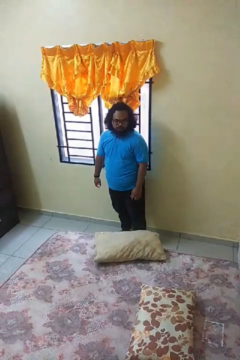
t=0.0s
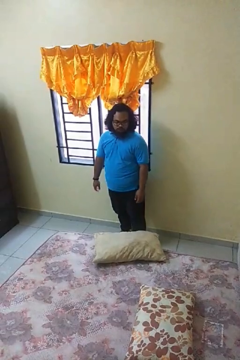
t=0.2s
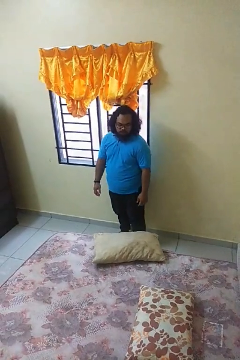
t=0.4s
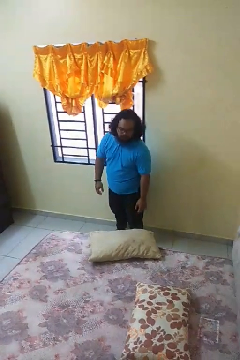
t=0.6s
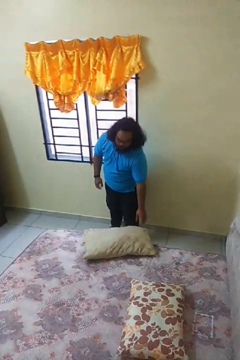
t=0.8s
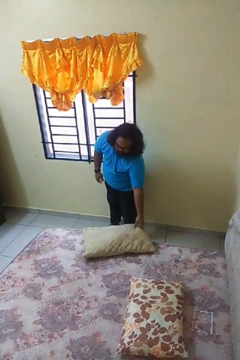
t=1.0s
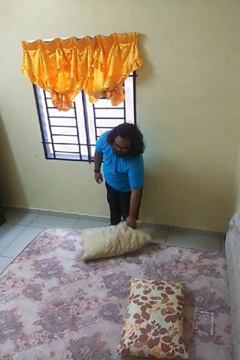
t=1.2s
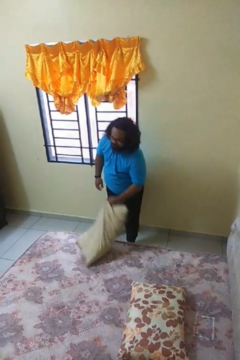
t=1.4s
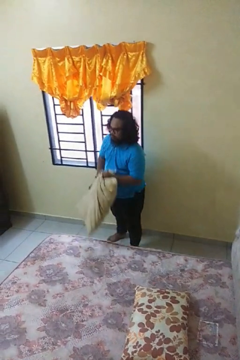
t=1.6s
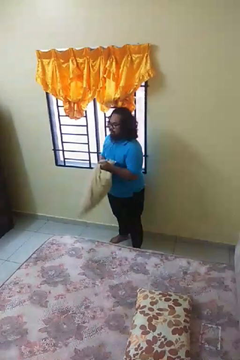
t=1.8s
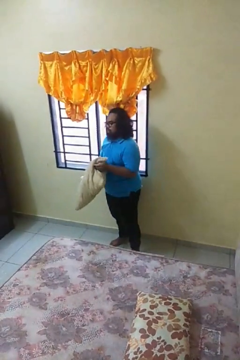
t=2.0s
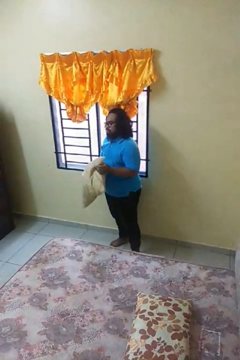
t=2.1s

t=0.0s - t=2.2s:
person picks up object from bed

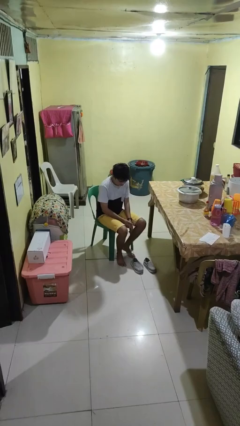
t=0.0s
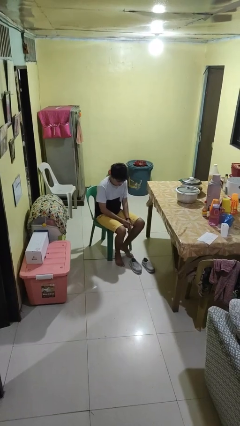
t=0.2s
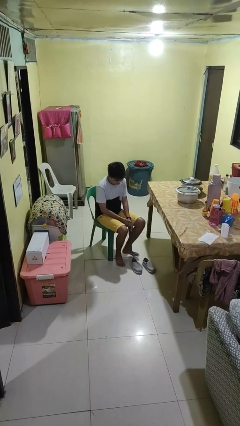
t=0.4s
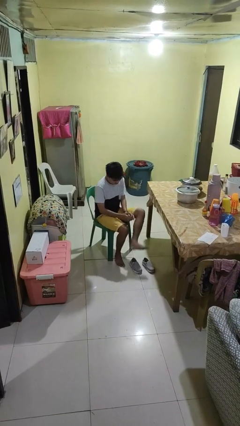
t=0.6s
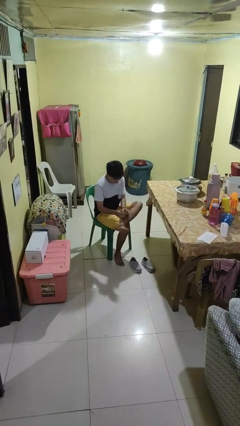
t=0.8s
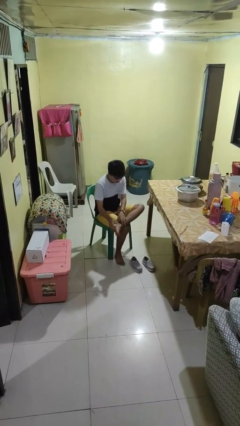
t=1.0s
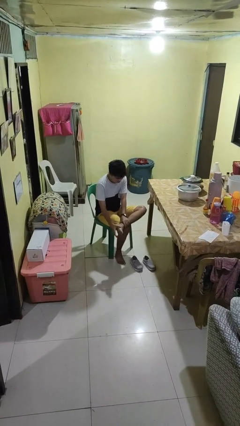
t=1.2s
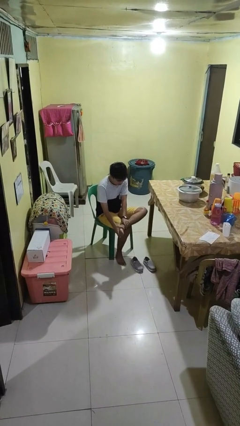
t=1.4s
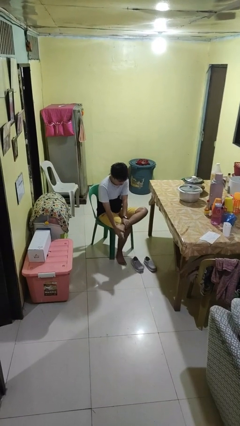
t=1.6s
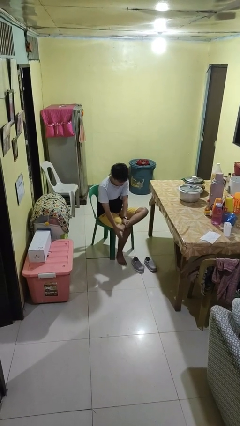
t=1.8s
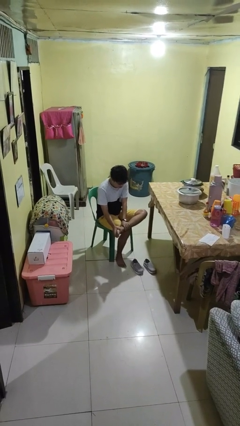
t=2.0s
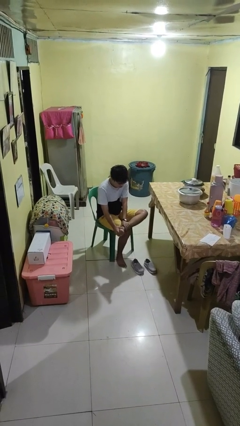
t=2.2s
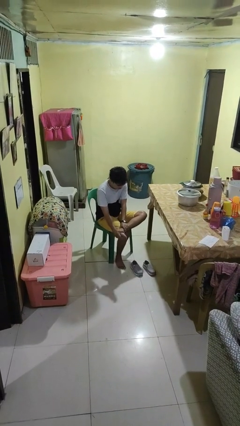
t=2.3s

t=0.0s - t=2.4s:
person rubs foot

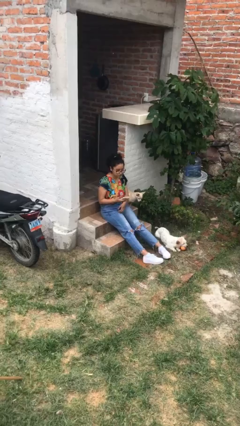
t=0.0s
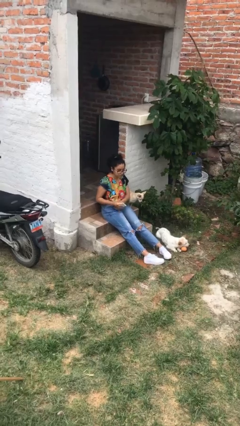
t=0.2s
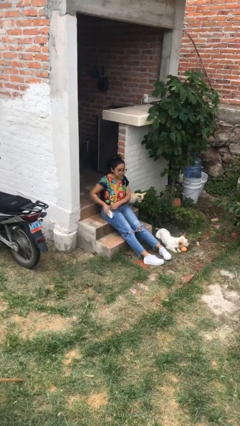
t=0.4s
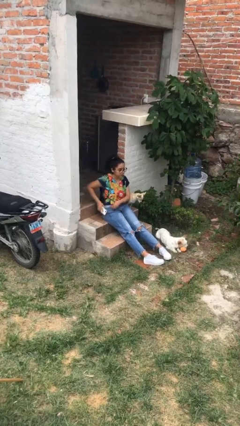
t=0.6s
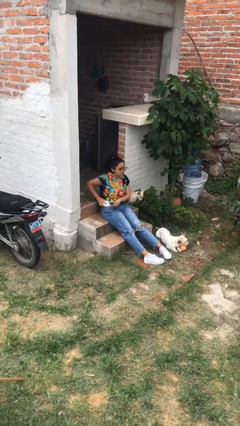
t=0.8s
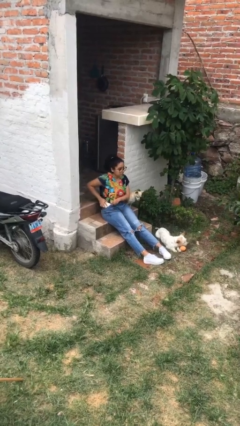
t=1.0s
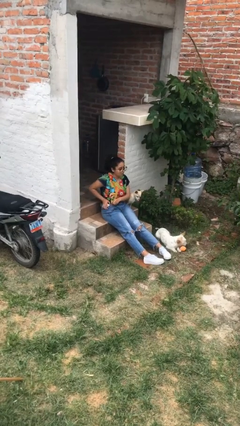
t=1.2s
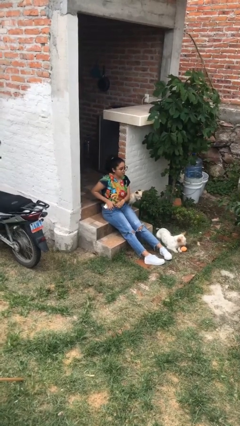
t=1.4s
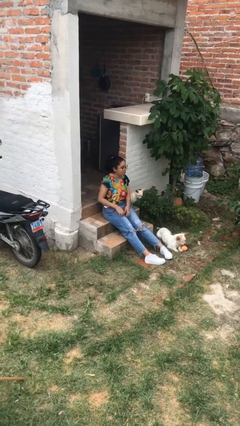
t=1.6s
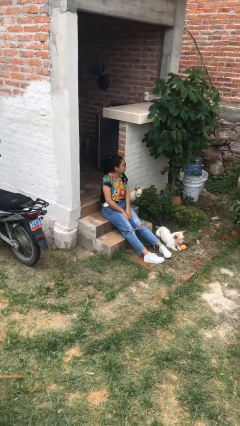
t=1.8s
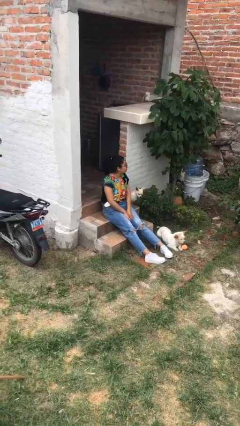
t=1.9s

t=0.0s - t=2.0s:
person puts phone into pocket

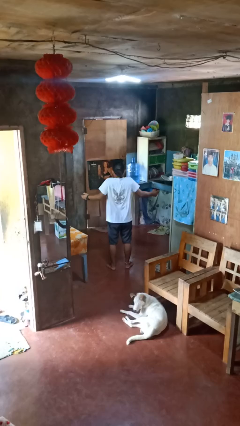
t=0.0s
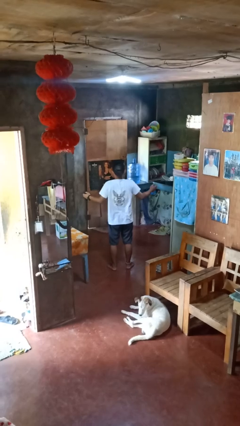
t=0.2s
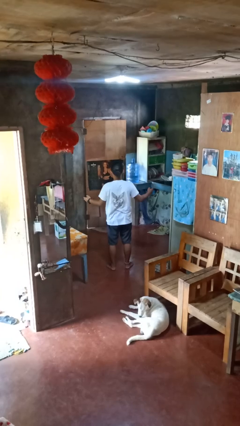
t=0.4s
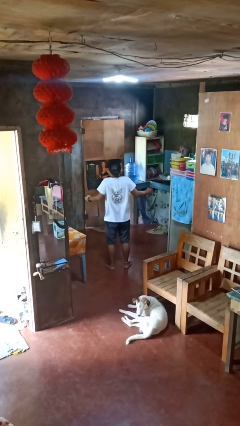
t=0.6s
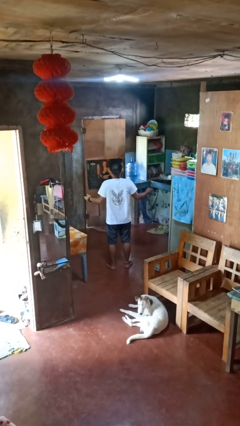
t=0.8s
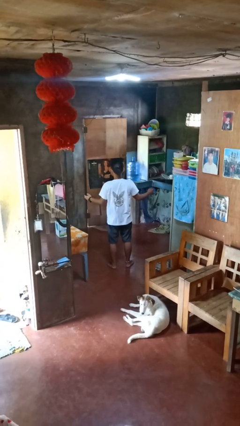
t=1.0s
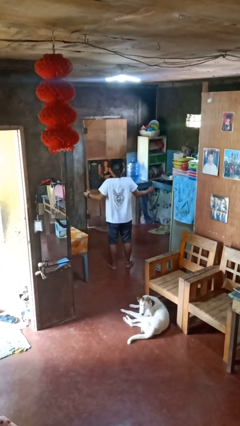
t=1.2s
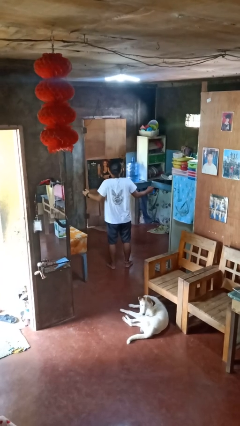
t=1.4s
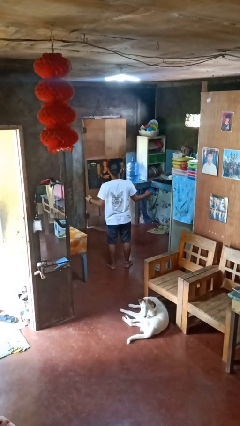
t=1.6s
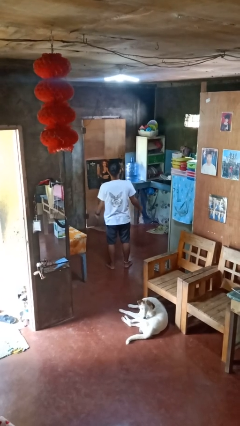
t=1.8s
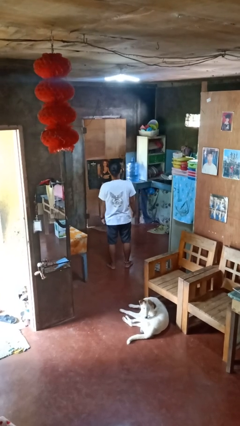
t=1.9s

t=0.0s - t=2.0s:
person shrugs

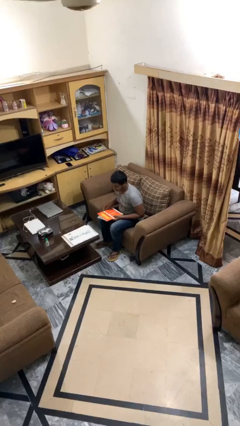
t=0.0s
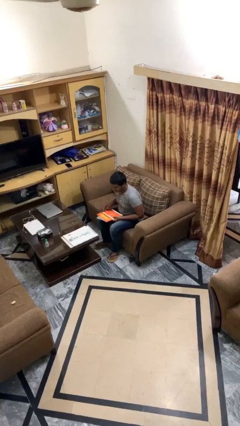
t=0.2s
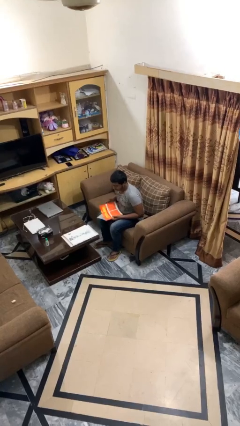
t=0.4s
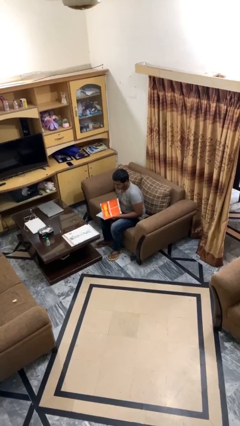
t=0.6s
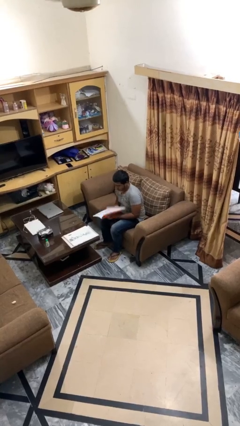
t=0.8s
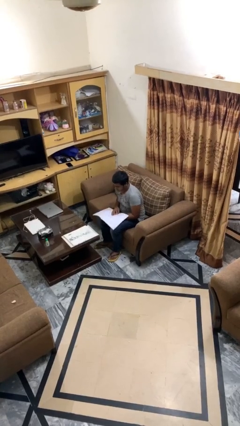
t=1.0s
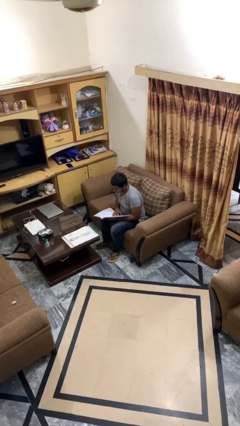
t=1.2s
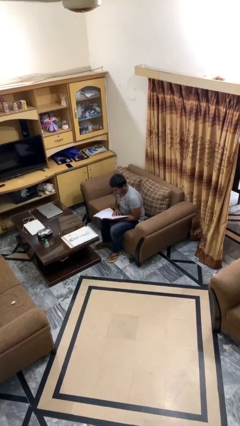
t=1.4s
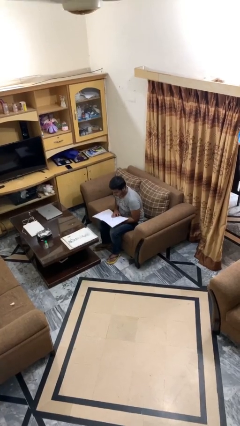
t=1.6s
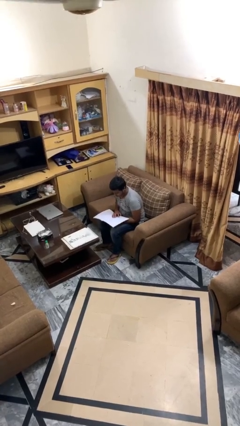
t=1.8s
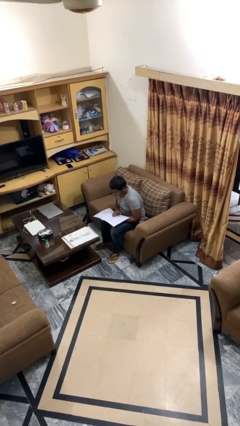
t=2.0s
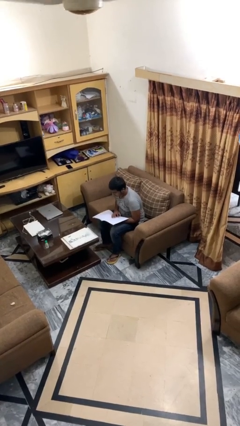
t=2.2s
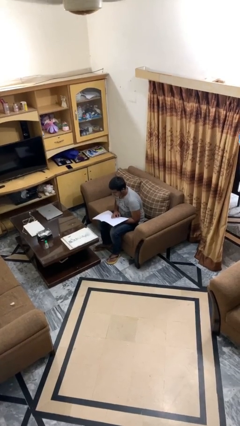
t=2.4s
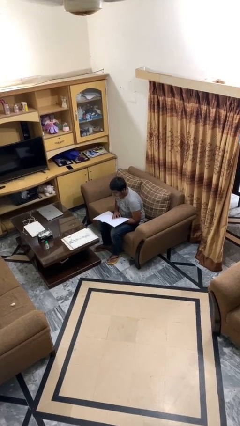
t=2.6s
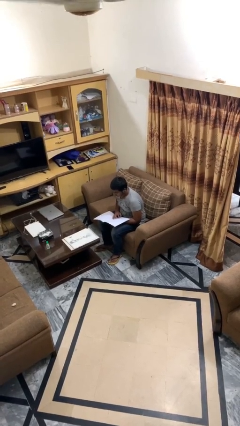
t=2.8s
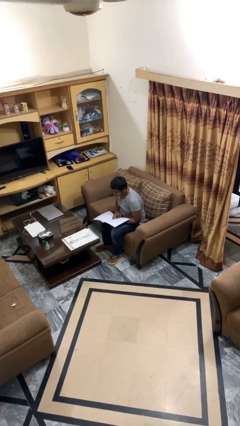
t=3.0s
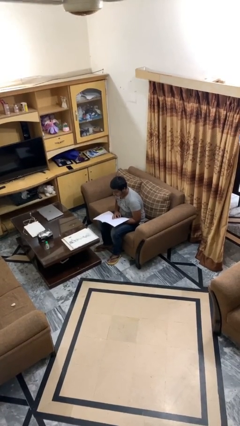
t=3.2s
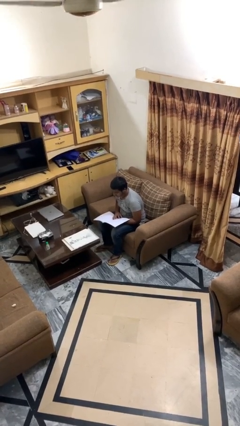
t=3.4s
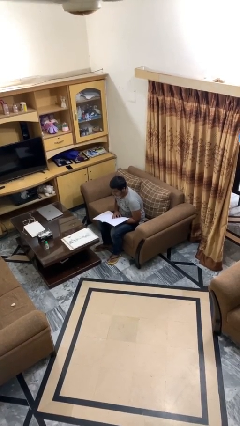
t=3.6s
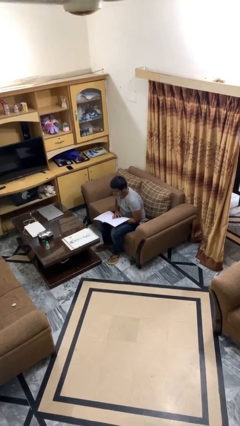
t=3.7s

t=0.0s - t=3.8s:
person reads document

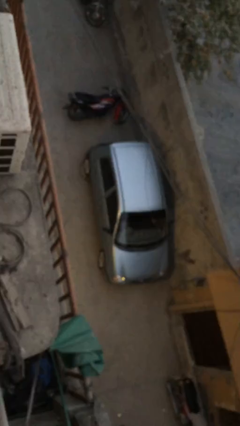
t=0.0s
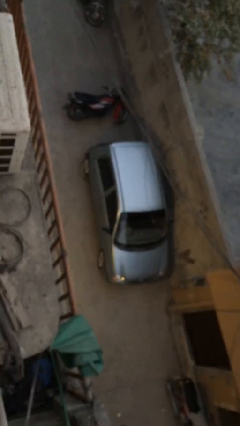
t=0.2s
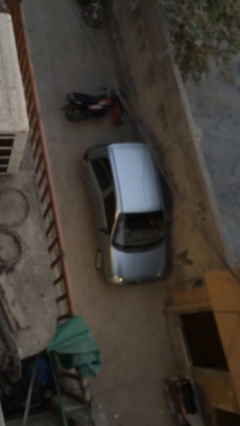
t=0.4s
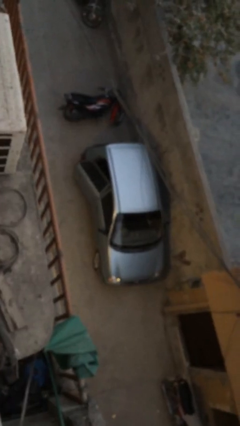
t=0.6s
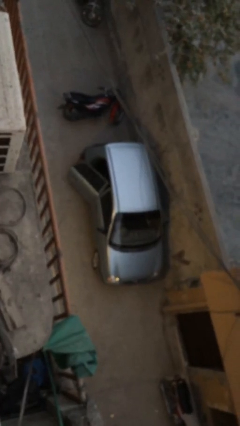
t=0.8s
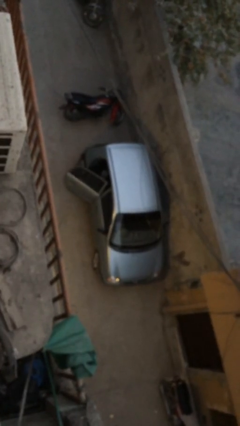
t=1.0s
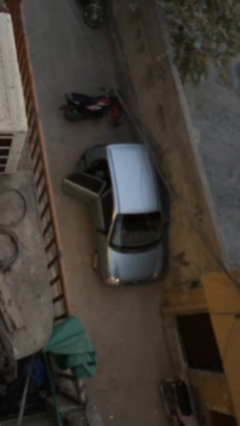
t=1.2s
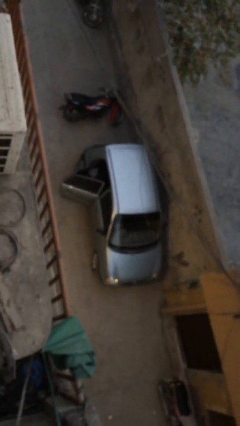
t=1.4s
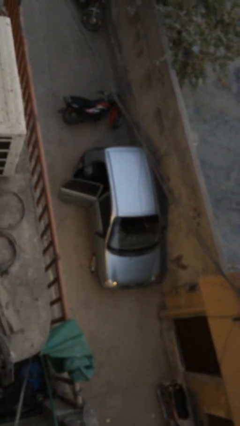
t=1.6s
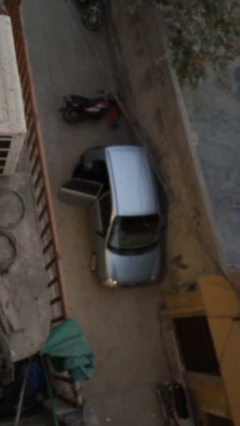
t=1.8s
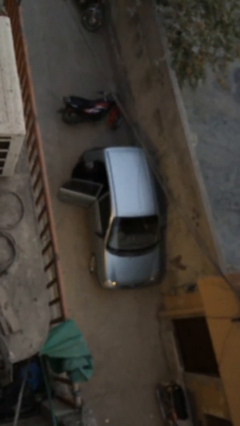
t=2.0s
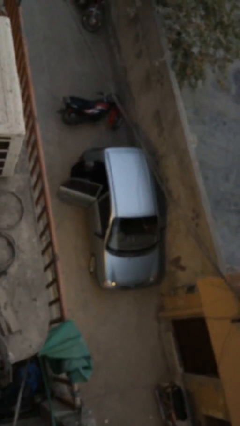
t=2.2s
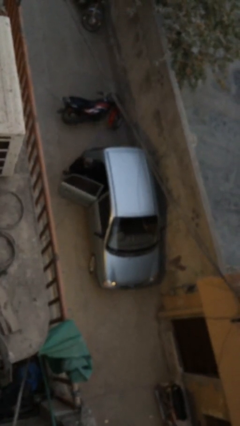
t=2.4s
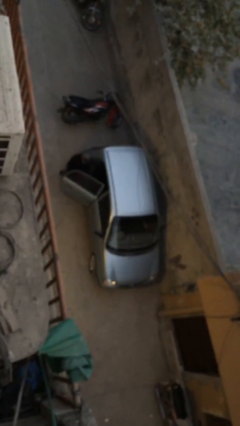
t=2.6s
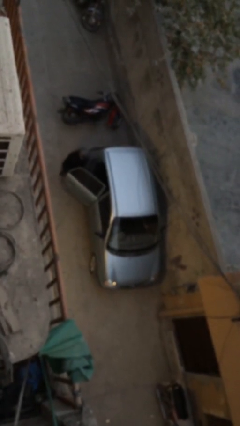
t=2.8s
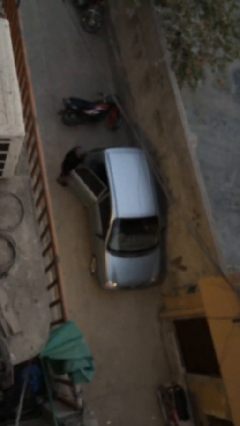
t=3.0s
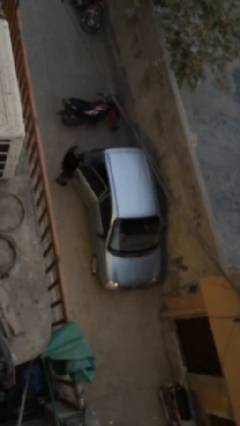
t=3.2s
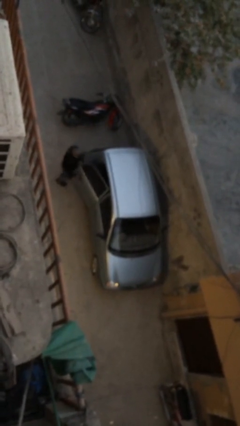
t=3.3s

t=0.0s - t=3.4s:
car drops off person

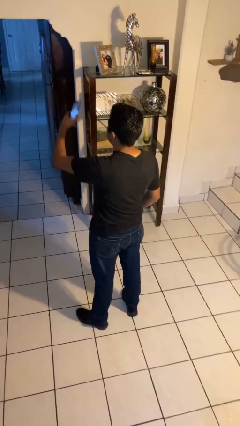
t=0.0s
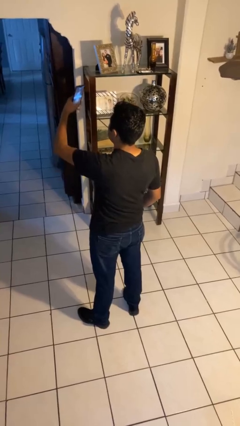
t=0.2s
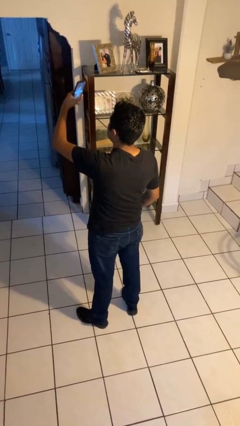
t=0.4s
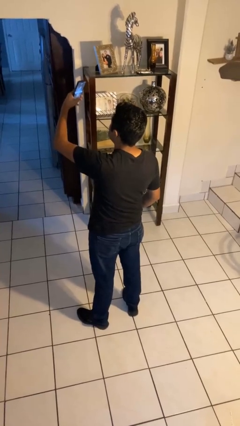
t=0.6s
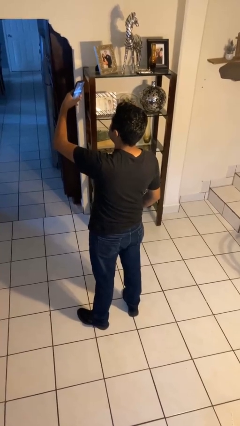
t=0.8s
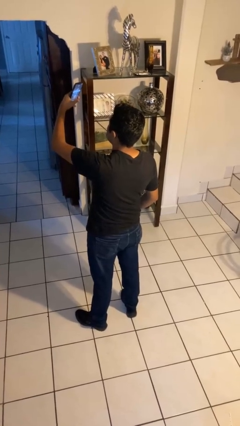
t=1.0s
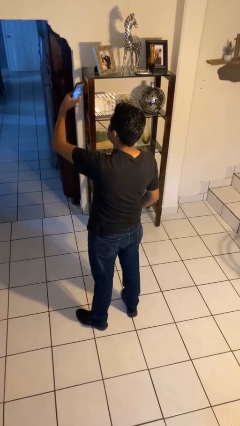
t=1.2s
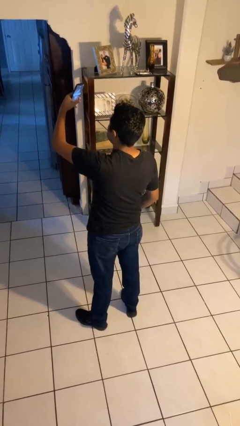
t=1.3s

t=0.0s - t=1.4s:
person takes selfie

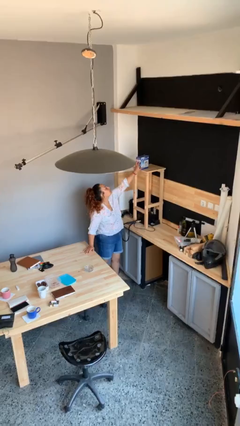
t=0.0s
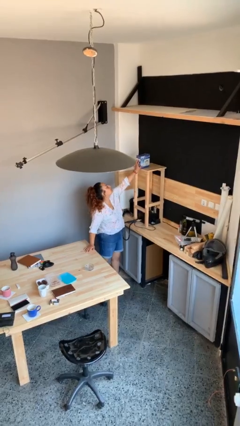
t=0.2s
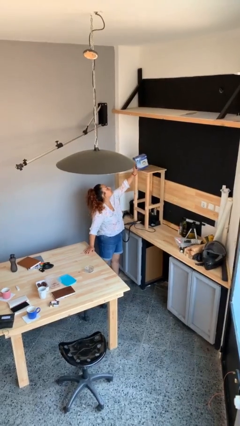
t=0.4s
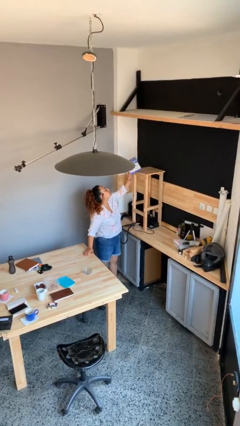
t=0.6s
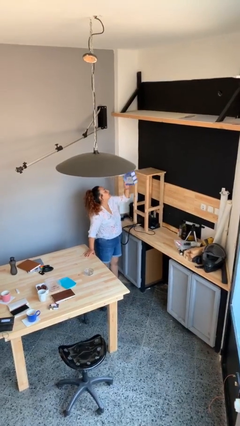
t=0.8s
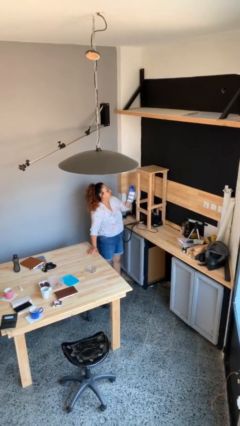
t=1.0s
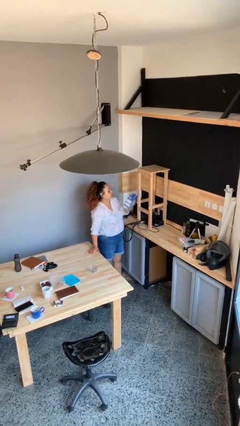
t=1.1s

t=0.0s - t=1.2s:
person picks up object from shelf
